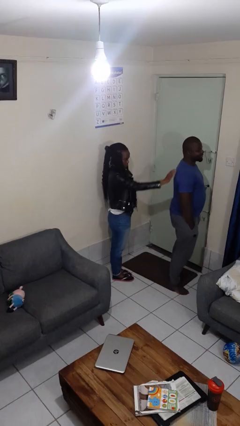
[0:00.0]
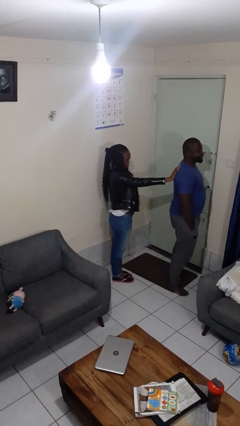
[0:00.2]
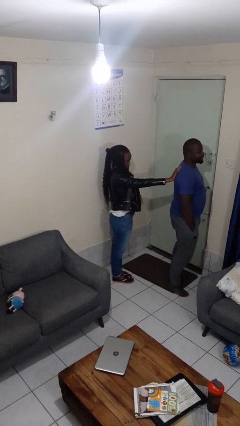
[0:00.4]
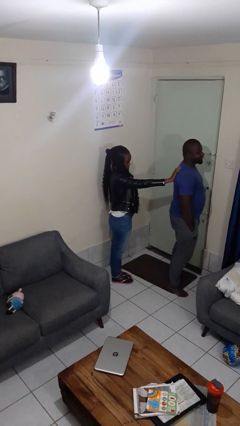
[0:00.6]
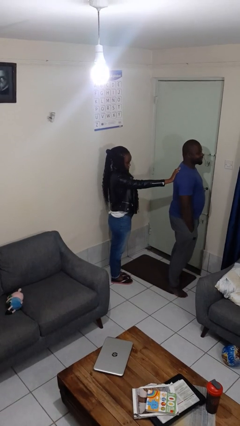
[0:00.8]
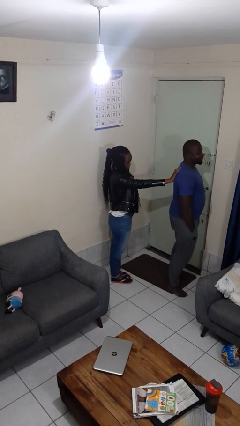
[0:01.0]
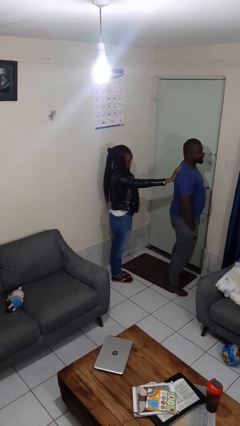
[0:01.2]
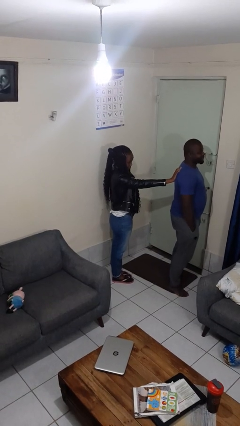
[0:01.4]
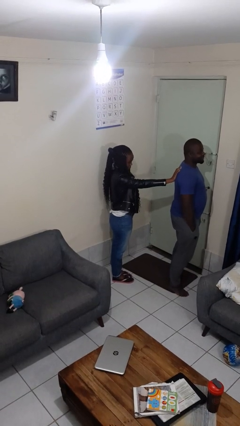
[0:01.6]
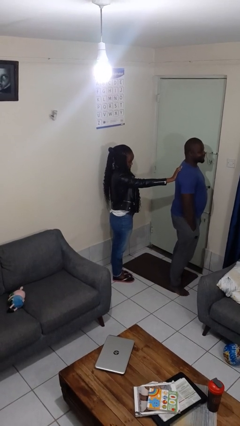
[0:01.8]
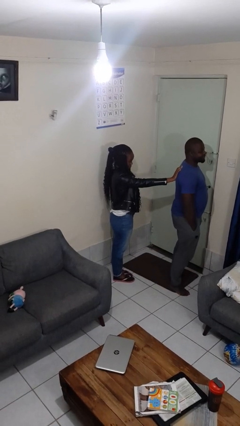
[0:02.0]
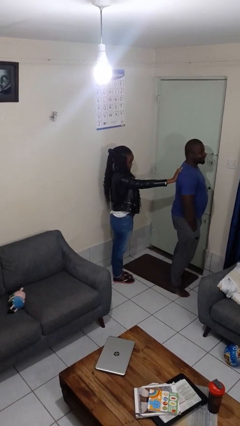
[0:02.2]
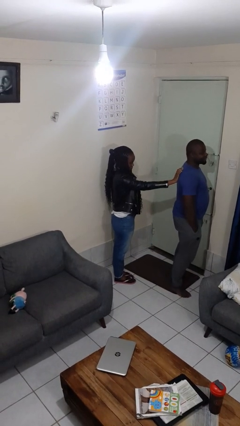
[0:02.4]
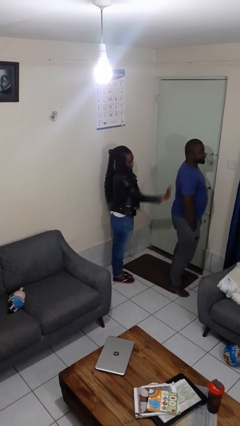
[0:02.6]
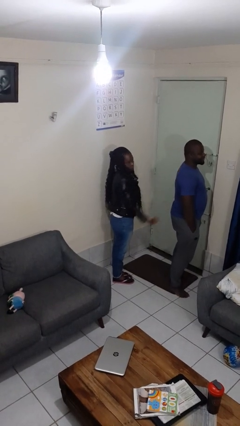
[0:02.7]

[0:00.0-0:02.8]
person touches back of person

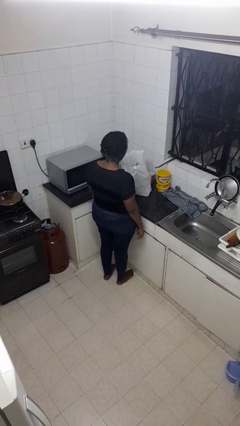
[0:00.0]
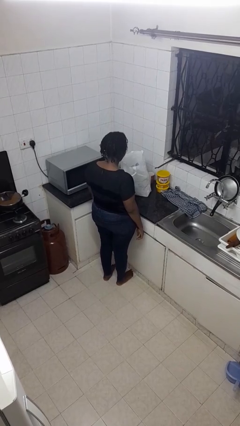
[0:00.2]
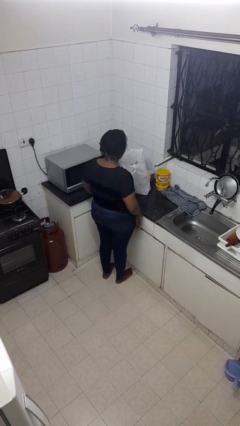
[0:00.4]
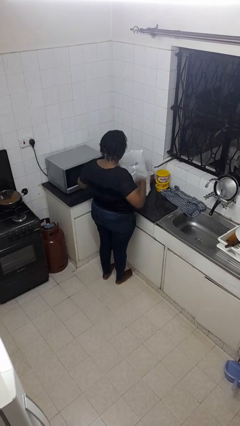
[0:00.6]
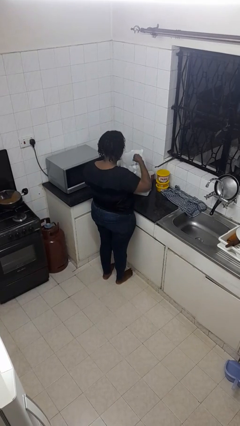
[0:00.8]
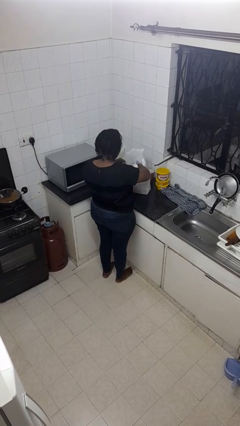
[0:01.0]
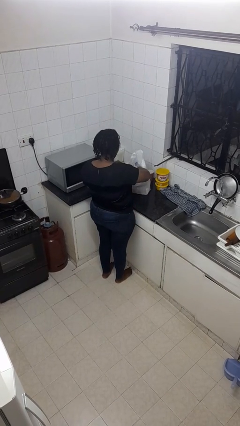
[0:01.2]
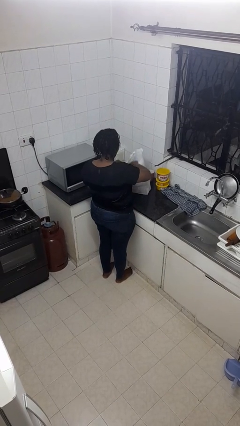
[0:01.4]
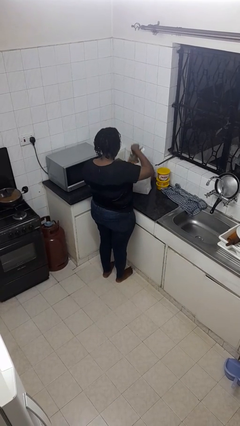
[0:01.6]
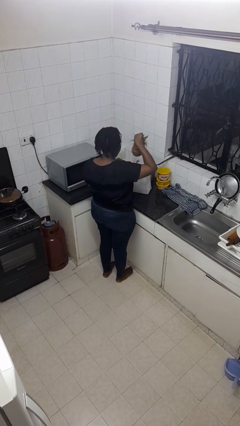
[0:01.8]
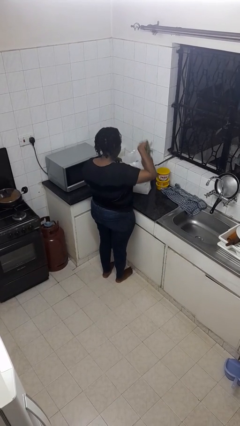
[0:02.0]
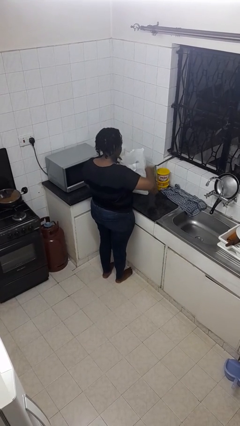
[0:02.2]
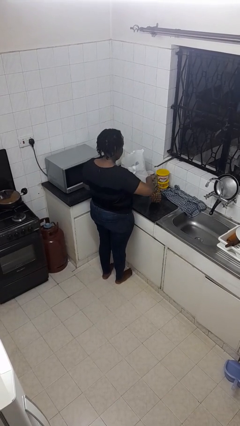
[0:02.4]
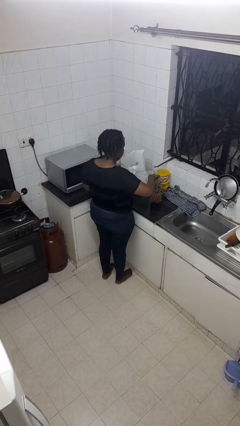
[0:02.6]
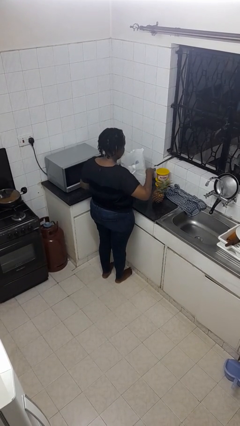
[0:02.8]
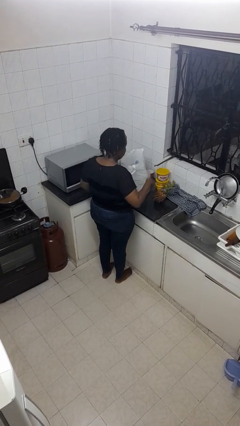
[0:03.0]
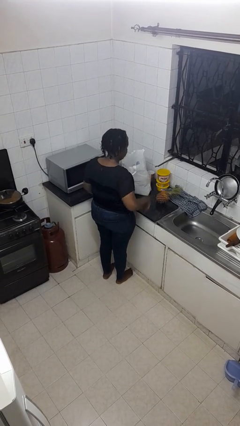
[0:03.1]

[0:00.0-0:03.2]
person takes object from bag

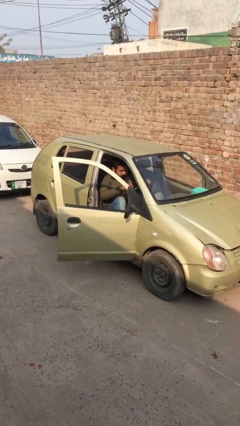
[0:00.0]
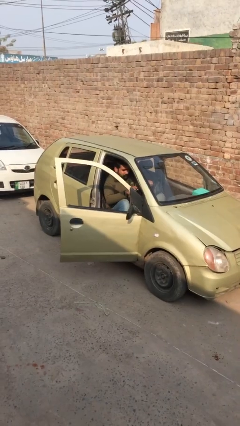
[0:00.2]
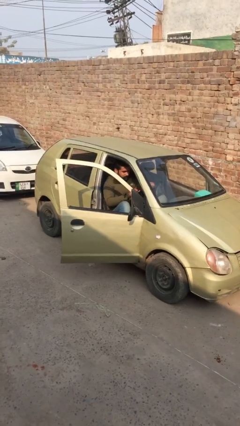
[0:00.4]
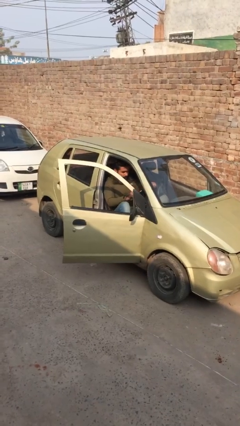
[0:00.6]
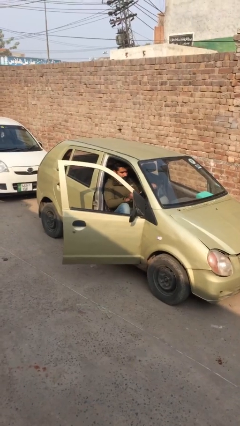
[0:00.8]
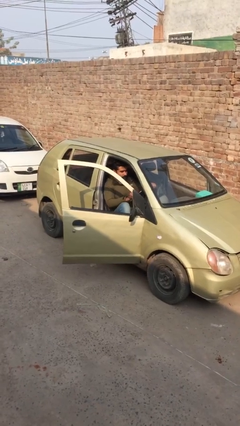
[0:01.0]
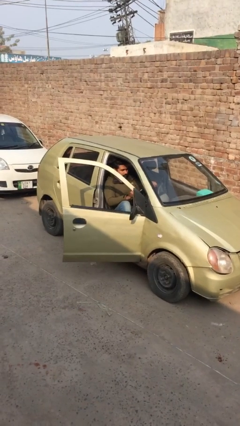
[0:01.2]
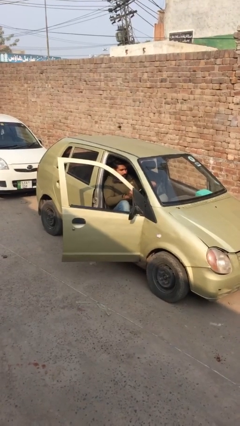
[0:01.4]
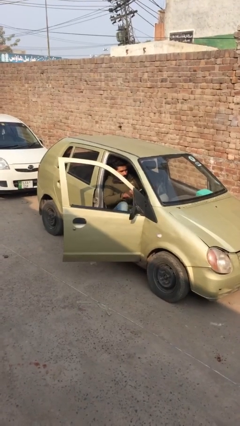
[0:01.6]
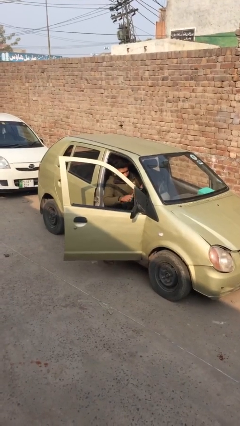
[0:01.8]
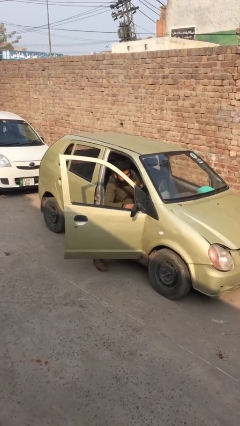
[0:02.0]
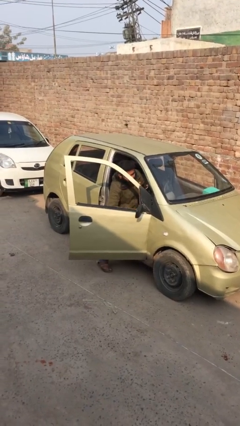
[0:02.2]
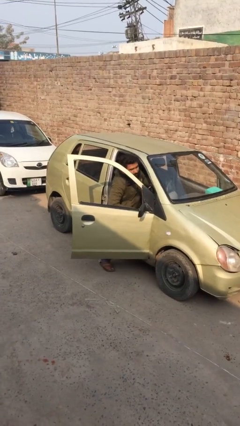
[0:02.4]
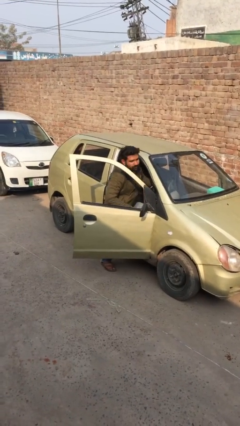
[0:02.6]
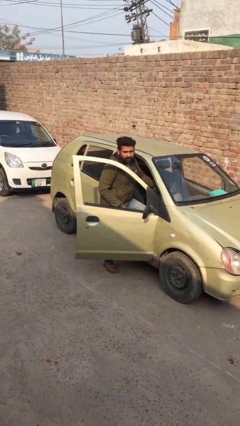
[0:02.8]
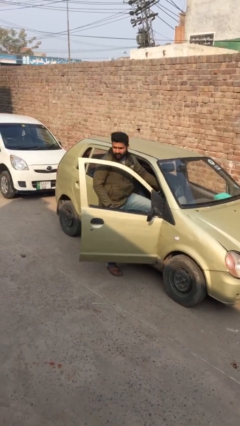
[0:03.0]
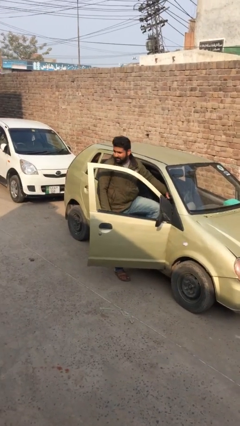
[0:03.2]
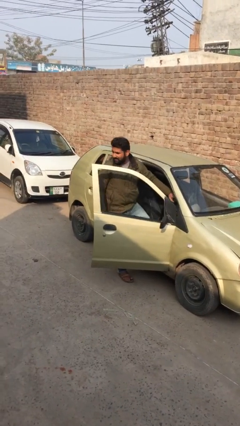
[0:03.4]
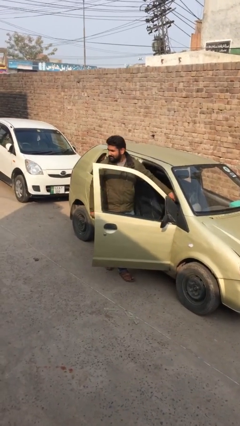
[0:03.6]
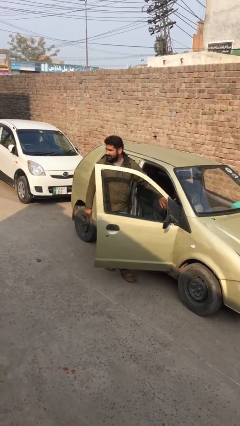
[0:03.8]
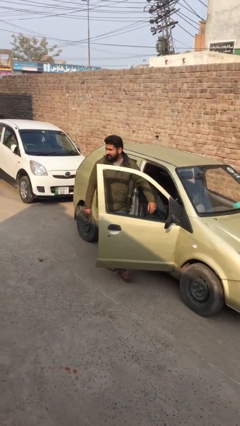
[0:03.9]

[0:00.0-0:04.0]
person exits car

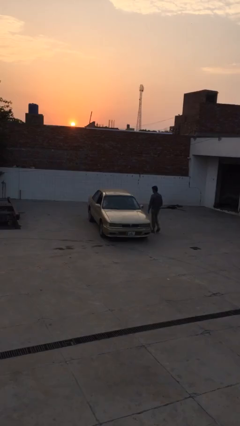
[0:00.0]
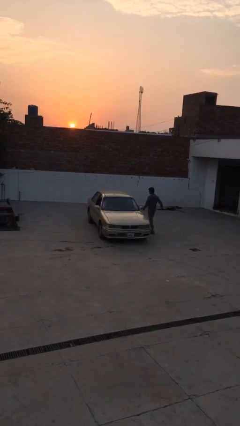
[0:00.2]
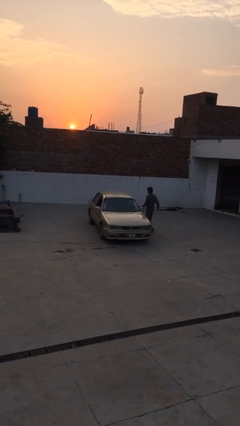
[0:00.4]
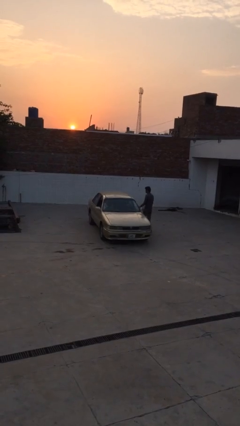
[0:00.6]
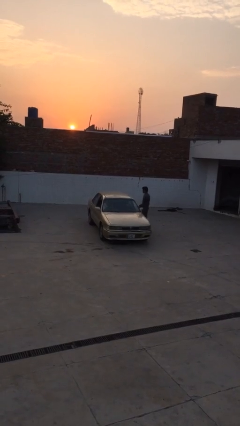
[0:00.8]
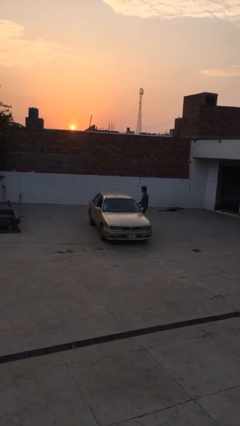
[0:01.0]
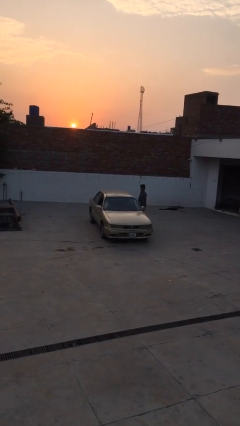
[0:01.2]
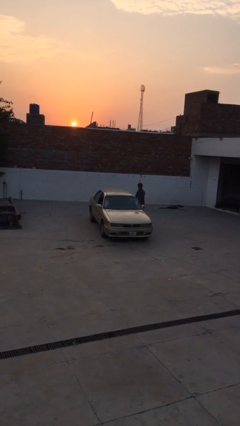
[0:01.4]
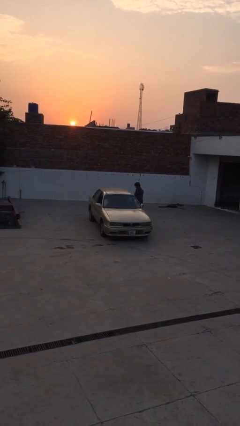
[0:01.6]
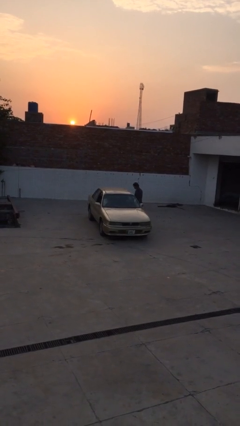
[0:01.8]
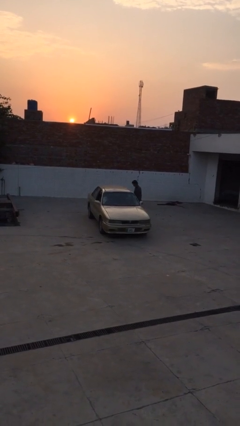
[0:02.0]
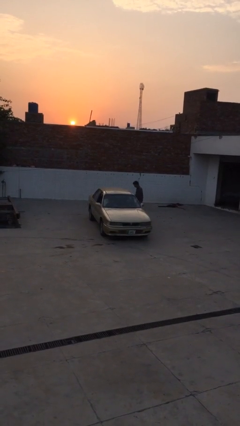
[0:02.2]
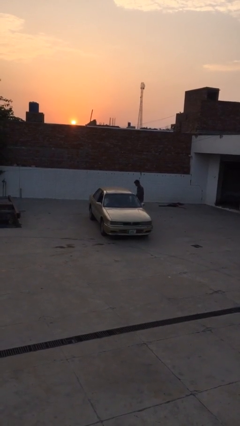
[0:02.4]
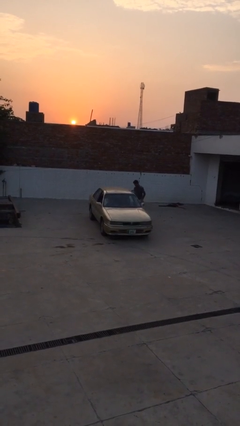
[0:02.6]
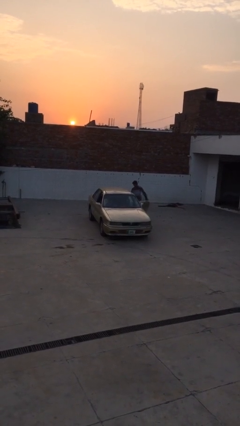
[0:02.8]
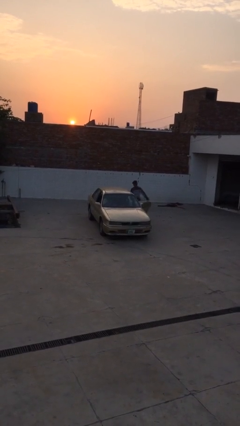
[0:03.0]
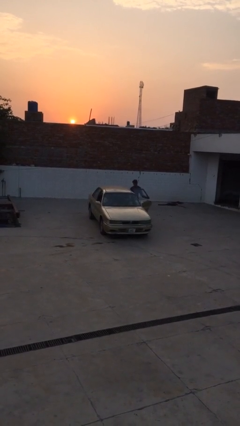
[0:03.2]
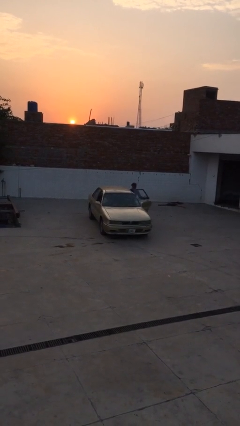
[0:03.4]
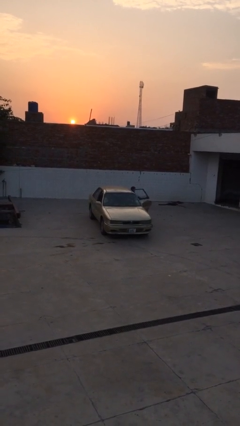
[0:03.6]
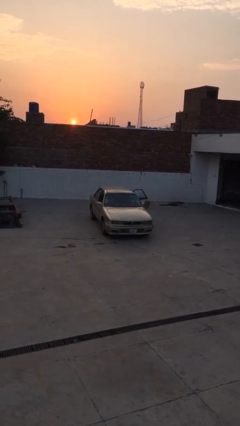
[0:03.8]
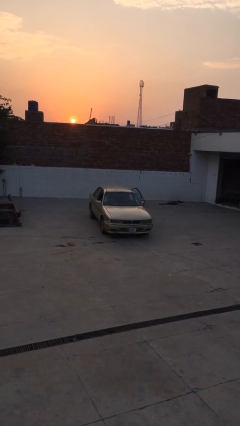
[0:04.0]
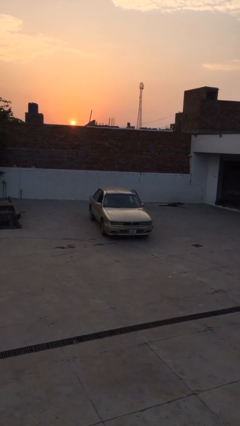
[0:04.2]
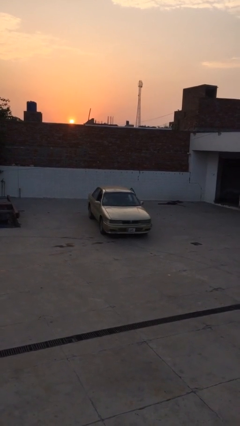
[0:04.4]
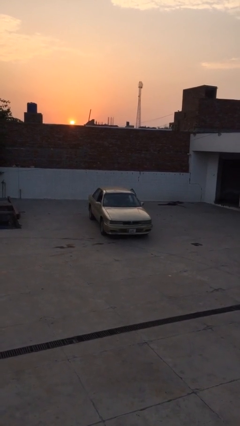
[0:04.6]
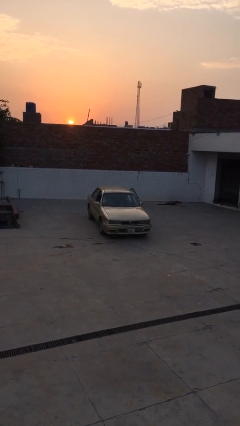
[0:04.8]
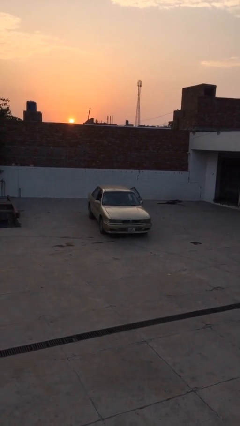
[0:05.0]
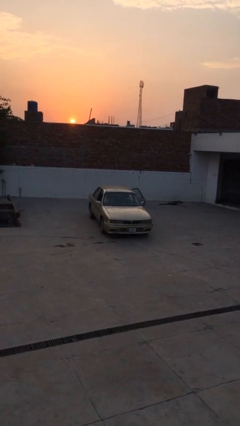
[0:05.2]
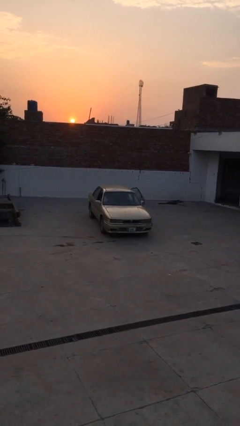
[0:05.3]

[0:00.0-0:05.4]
car picks up person

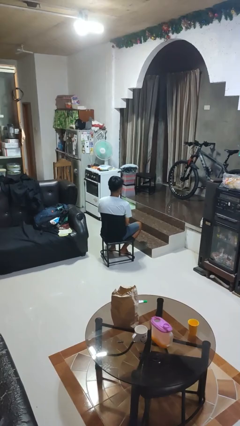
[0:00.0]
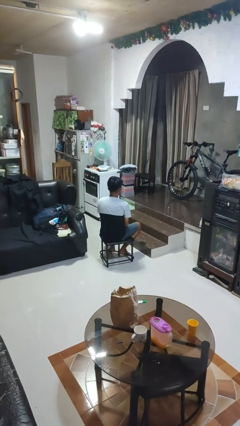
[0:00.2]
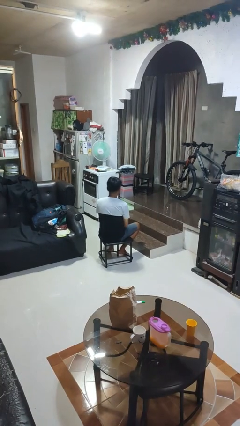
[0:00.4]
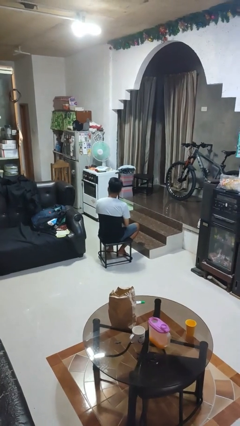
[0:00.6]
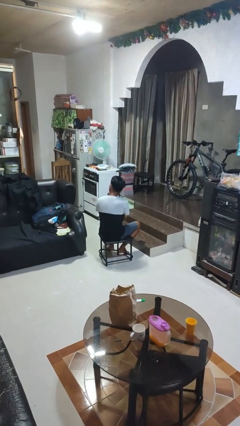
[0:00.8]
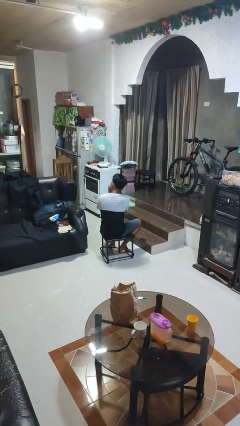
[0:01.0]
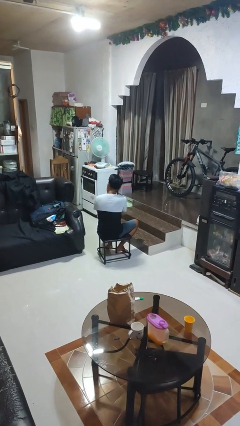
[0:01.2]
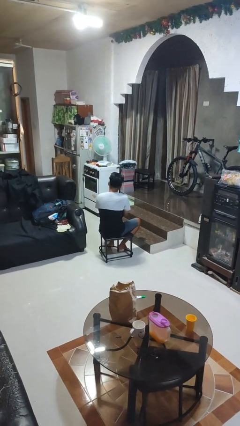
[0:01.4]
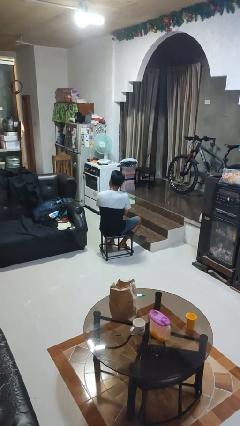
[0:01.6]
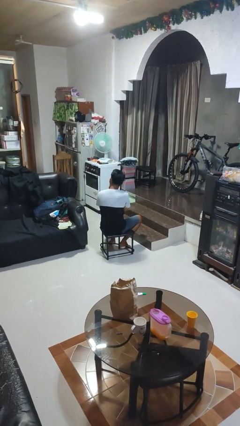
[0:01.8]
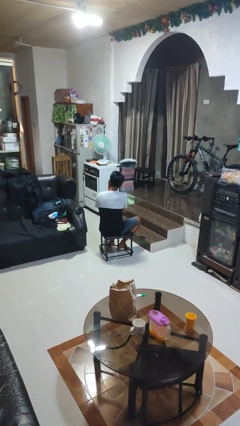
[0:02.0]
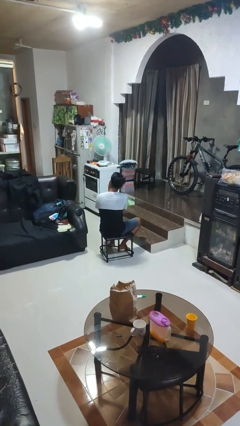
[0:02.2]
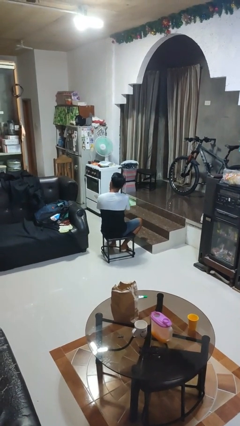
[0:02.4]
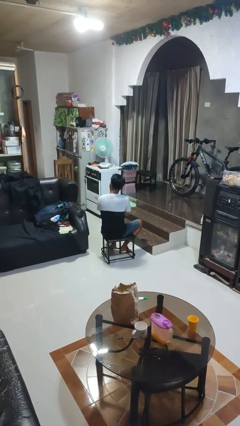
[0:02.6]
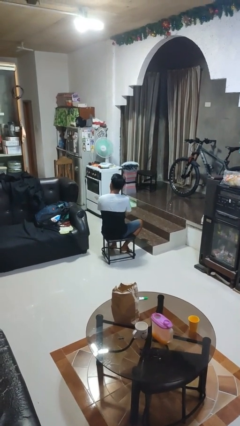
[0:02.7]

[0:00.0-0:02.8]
person strokes chin
